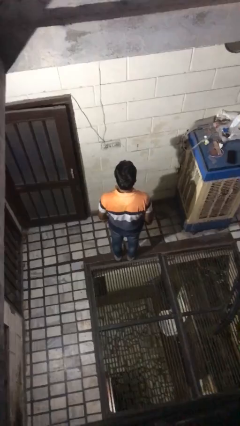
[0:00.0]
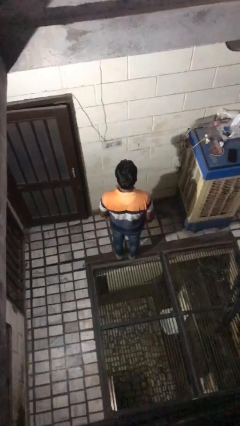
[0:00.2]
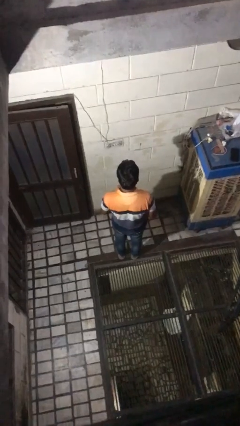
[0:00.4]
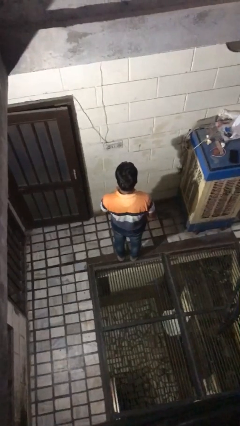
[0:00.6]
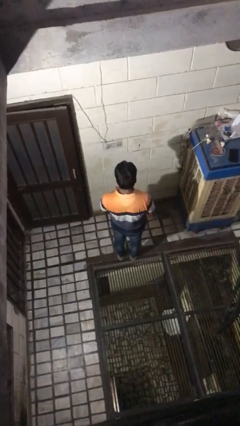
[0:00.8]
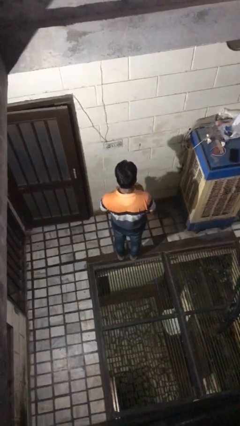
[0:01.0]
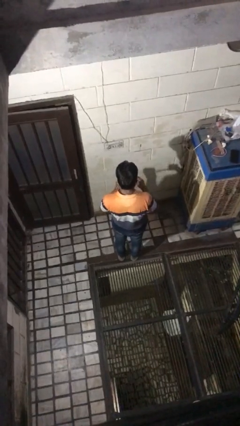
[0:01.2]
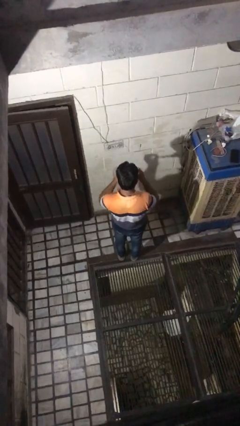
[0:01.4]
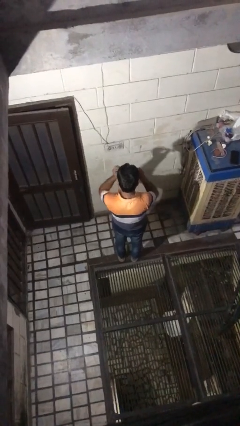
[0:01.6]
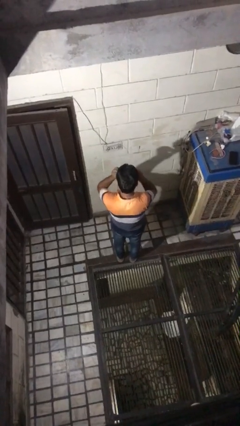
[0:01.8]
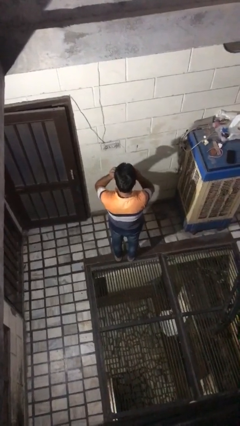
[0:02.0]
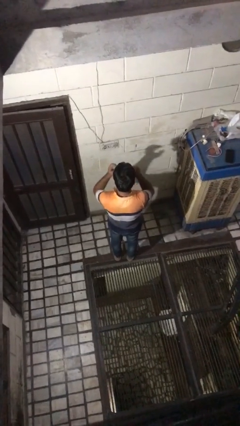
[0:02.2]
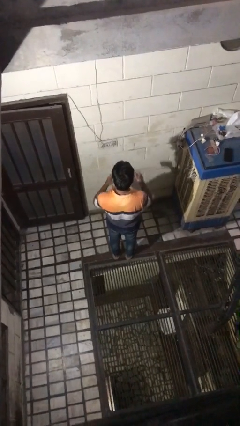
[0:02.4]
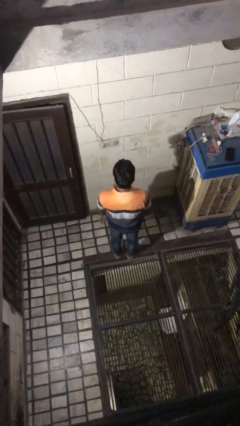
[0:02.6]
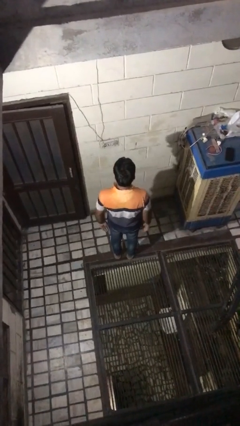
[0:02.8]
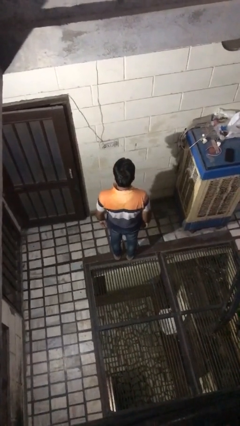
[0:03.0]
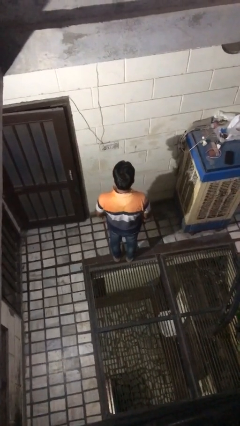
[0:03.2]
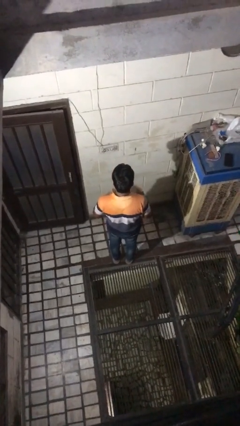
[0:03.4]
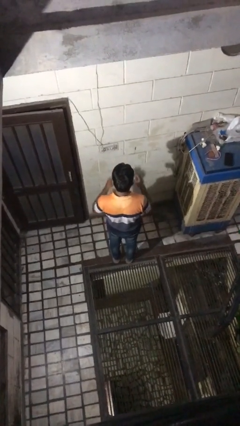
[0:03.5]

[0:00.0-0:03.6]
person puts on glasses

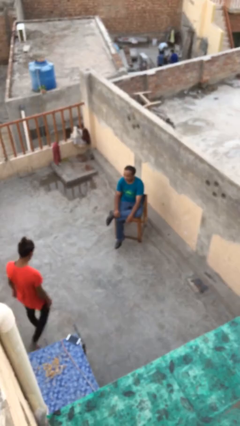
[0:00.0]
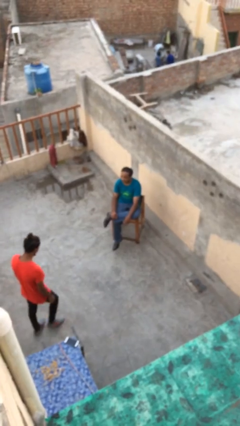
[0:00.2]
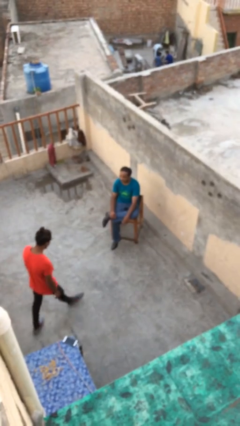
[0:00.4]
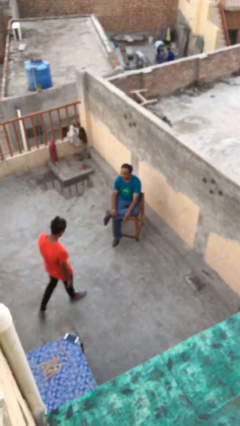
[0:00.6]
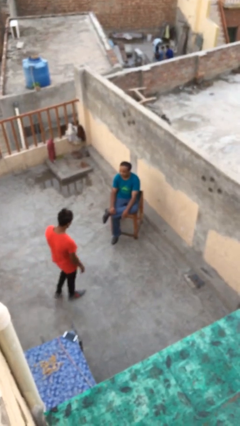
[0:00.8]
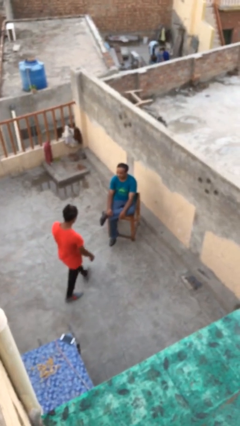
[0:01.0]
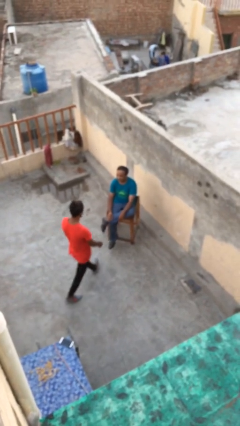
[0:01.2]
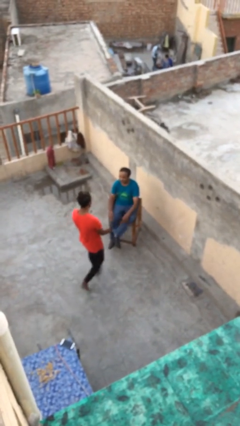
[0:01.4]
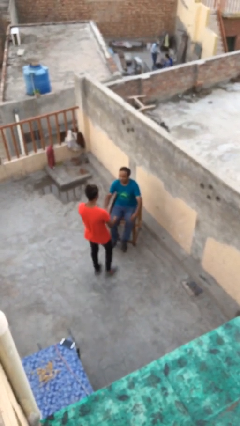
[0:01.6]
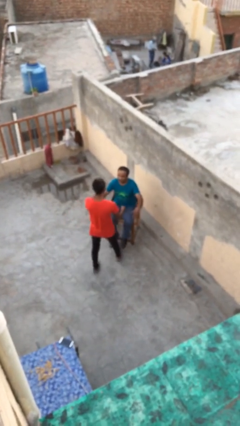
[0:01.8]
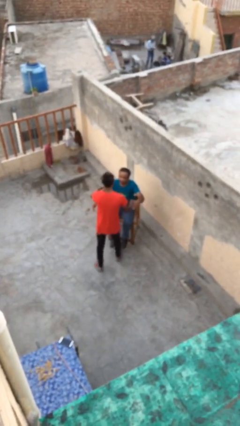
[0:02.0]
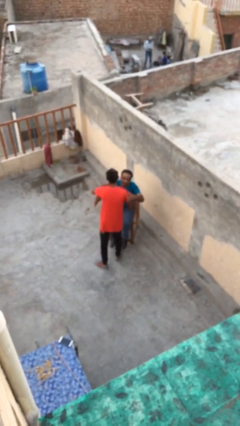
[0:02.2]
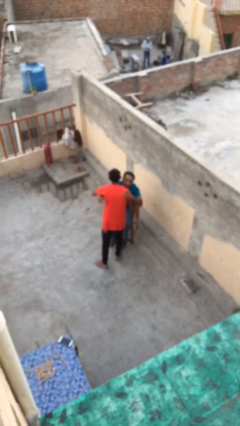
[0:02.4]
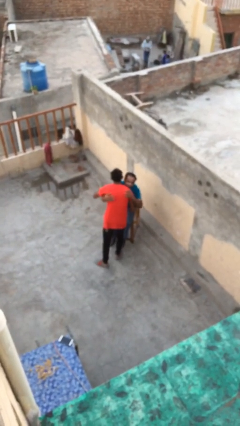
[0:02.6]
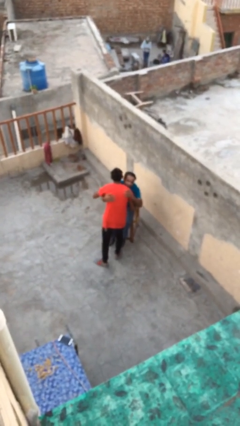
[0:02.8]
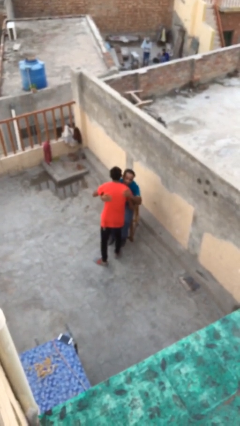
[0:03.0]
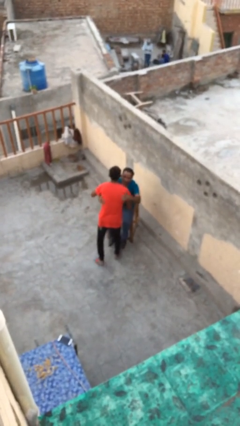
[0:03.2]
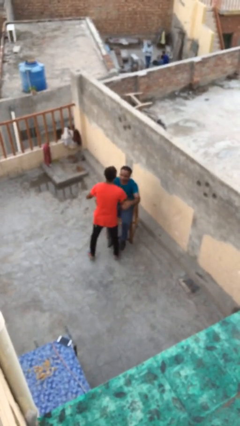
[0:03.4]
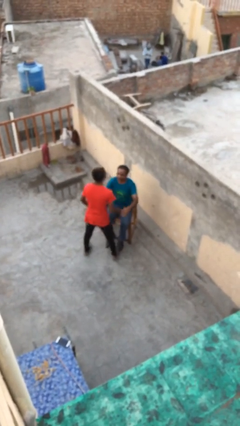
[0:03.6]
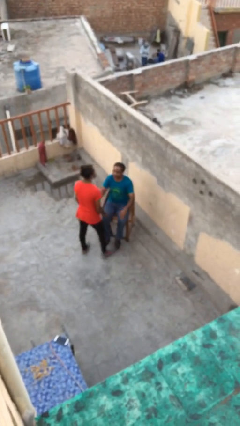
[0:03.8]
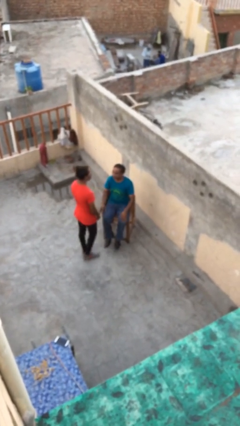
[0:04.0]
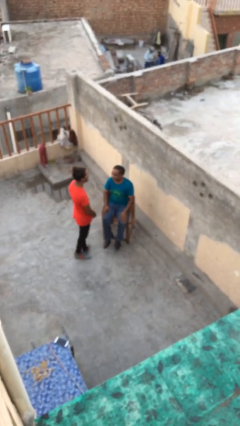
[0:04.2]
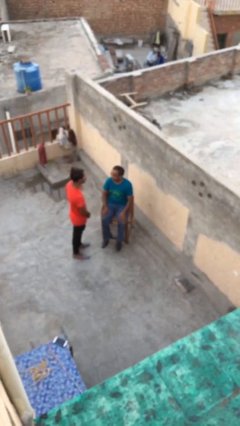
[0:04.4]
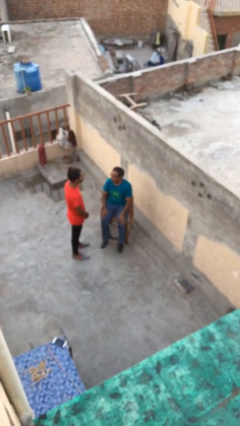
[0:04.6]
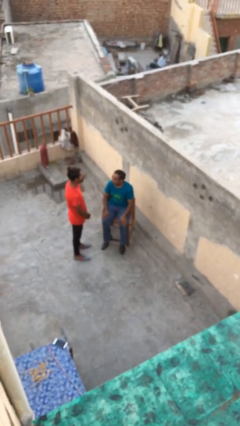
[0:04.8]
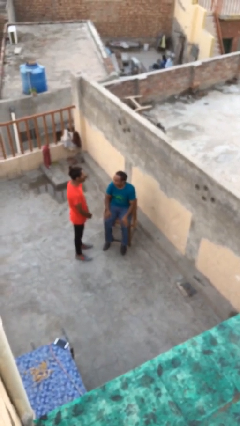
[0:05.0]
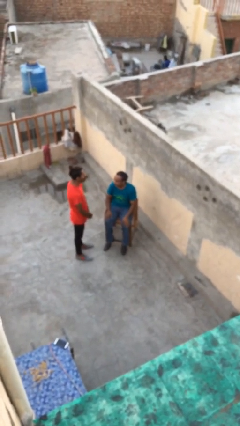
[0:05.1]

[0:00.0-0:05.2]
person embraces person

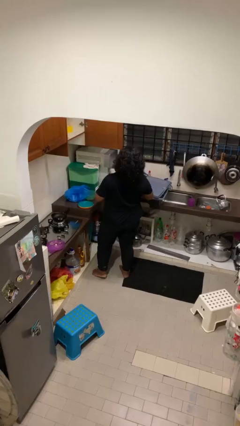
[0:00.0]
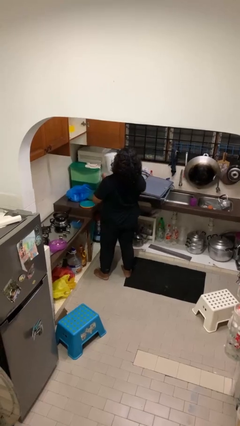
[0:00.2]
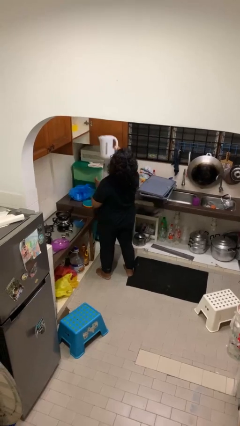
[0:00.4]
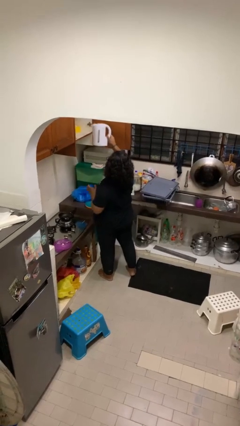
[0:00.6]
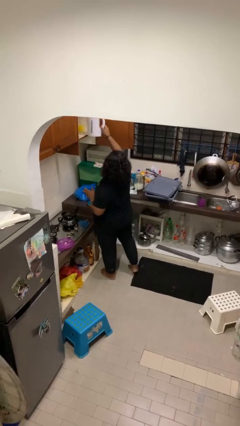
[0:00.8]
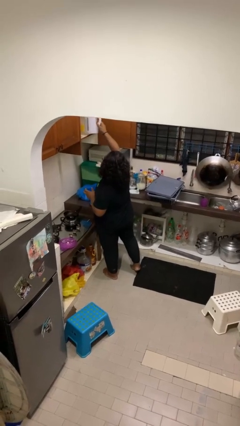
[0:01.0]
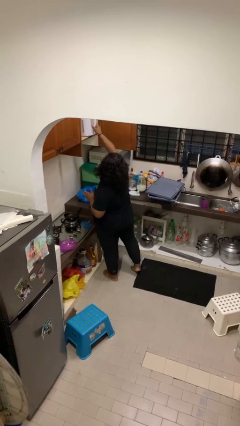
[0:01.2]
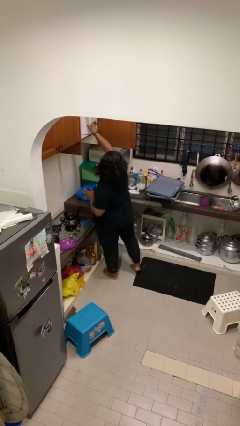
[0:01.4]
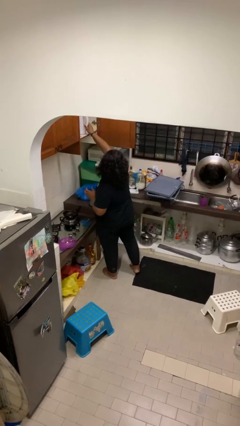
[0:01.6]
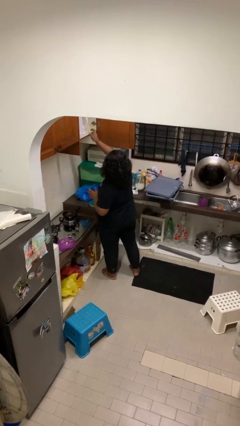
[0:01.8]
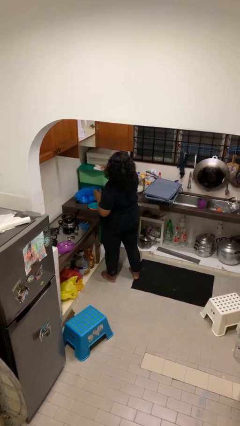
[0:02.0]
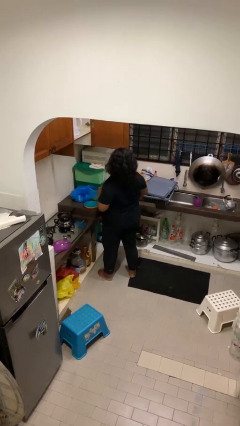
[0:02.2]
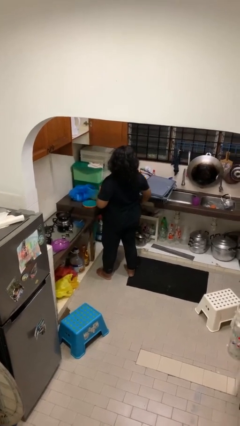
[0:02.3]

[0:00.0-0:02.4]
person puts object in cabinet

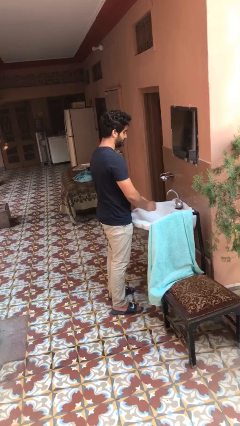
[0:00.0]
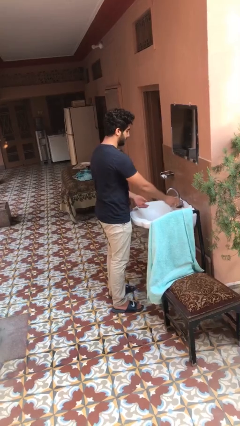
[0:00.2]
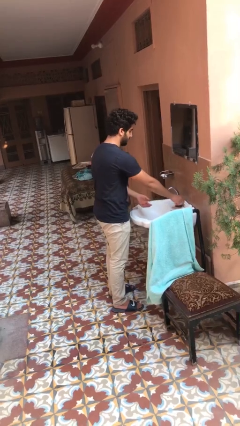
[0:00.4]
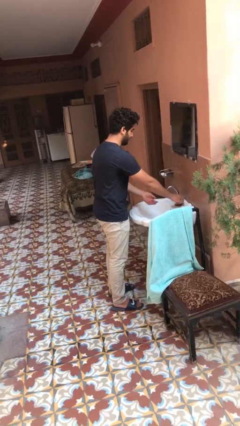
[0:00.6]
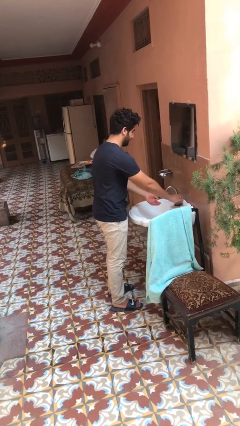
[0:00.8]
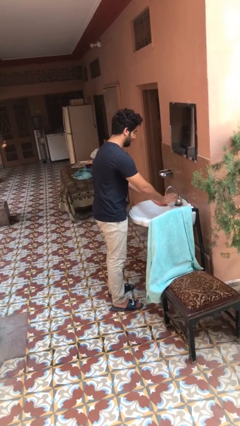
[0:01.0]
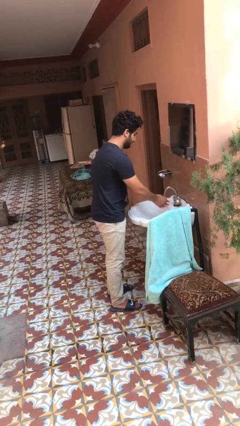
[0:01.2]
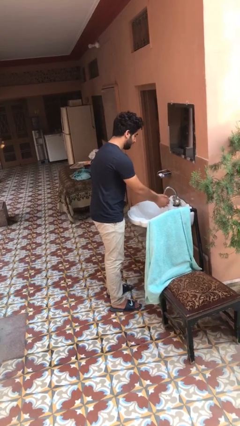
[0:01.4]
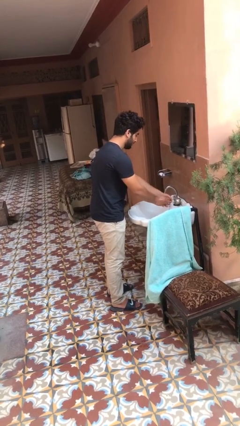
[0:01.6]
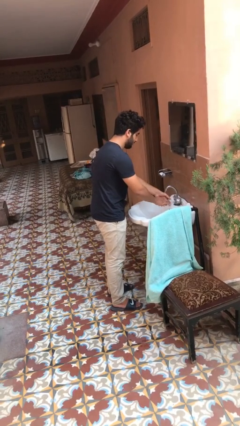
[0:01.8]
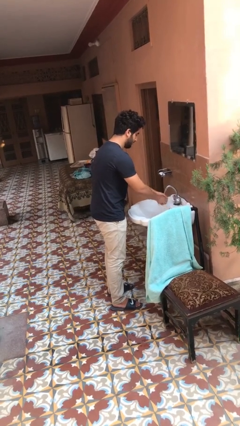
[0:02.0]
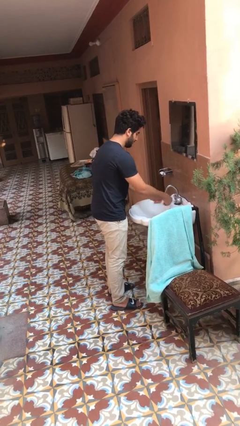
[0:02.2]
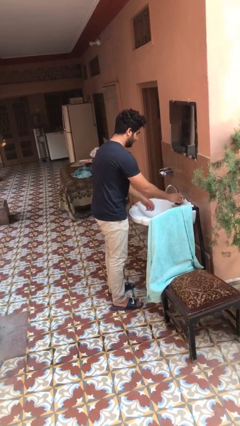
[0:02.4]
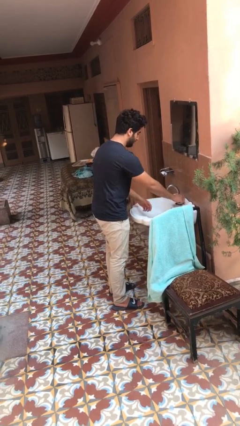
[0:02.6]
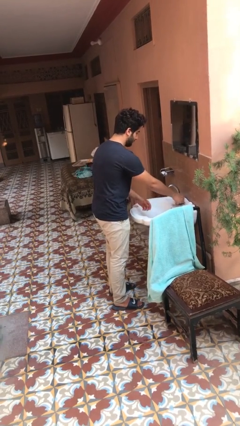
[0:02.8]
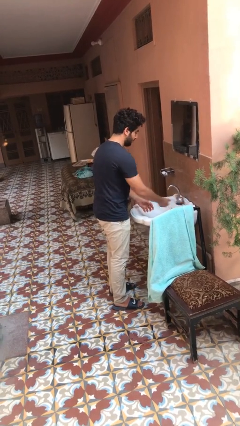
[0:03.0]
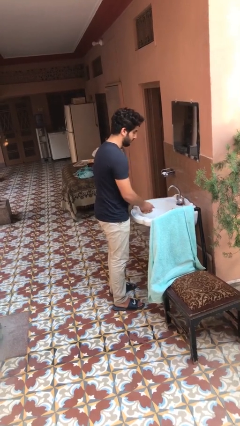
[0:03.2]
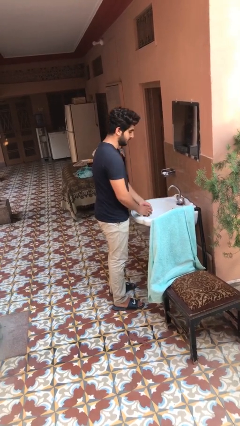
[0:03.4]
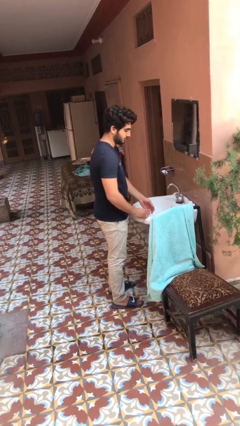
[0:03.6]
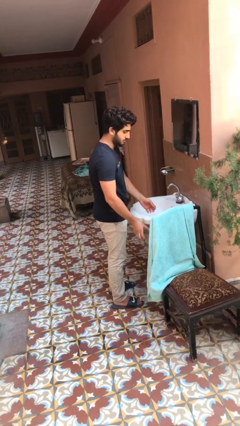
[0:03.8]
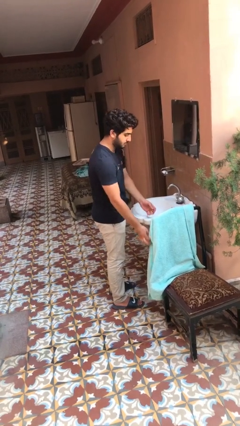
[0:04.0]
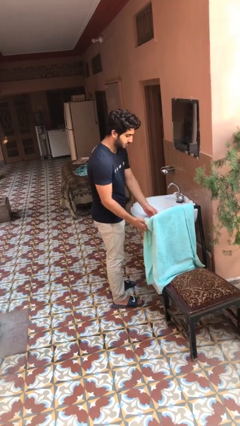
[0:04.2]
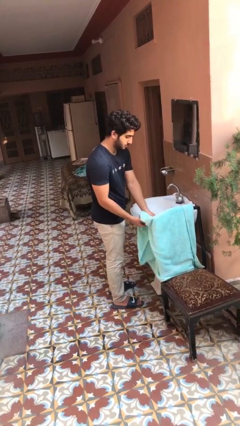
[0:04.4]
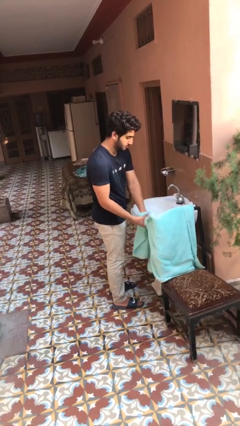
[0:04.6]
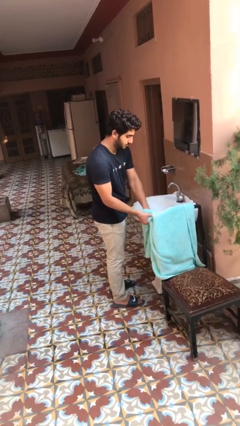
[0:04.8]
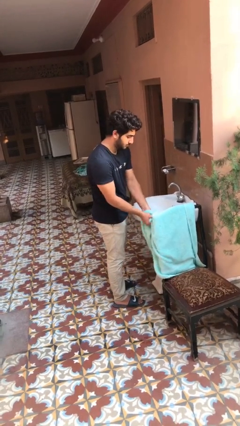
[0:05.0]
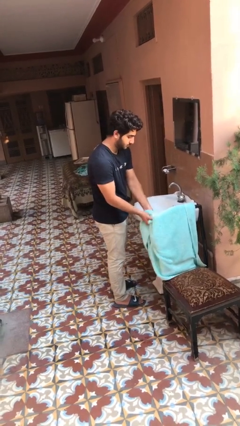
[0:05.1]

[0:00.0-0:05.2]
person washes hands

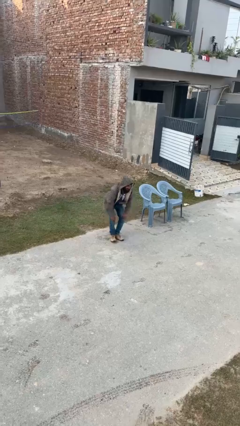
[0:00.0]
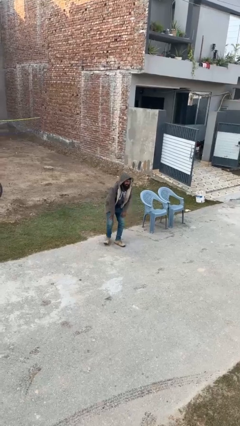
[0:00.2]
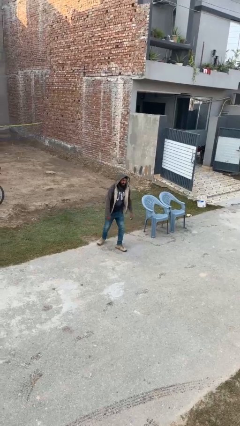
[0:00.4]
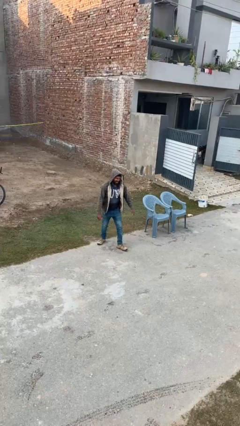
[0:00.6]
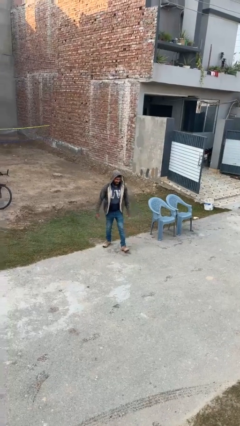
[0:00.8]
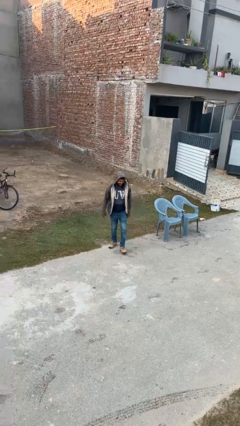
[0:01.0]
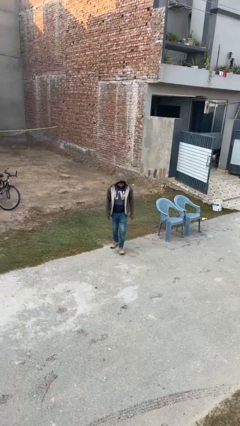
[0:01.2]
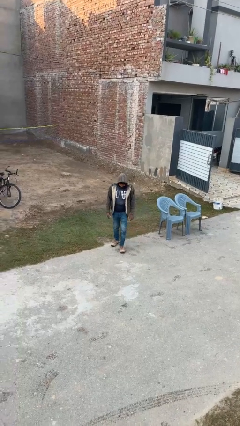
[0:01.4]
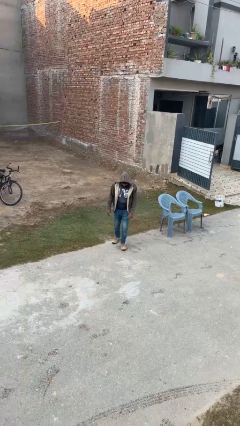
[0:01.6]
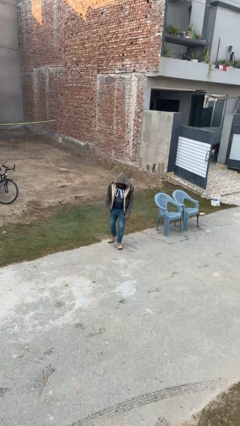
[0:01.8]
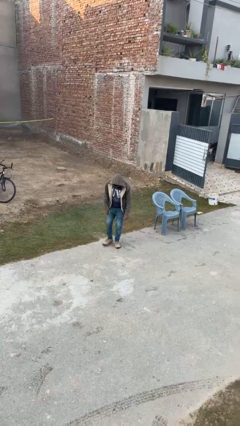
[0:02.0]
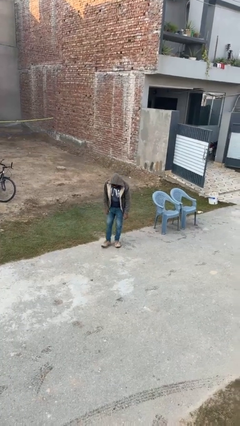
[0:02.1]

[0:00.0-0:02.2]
person stands up
